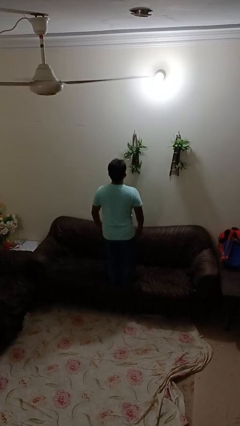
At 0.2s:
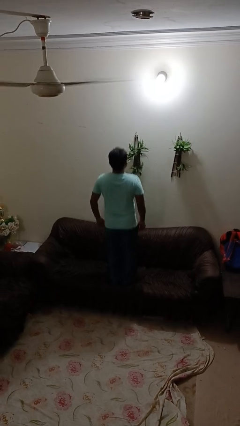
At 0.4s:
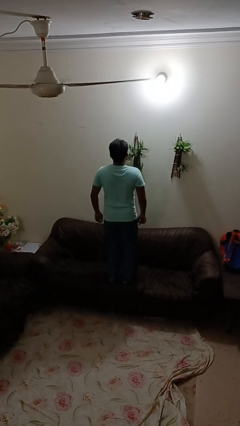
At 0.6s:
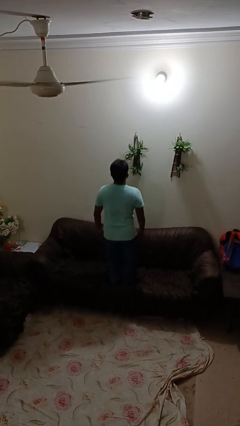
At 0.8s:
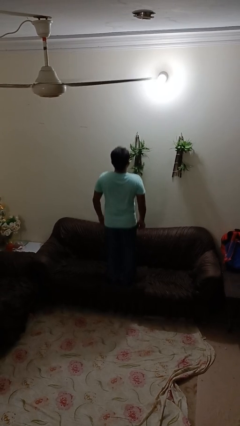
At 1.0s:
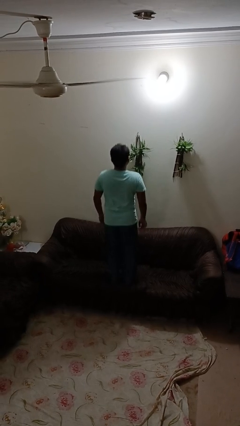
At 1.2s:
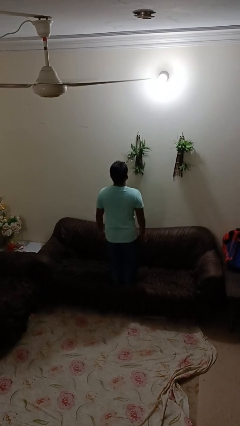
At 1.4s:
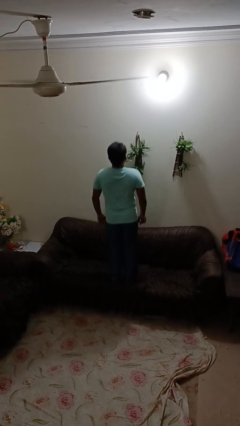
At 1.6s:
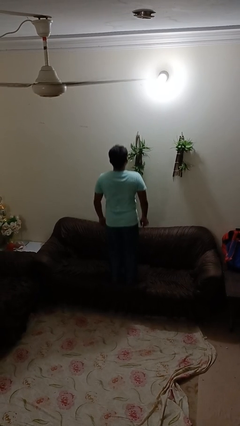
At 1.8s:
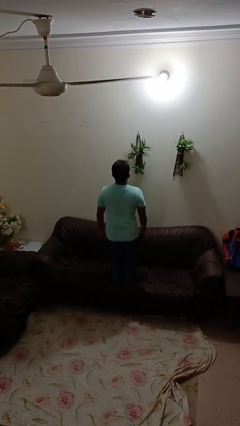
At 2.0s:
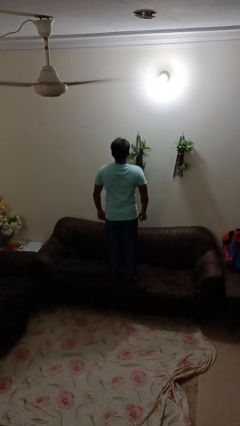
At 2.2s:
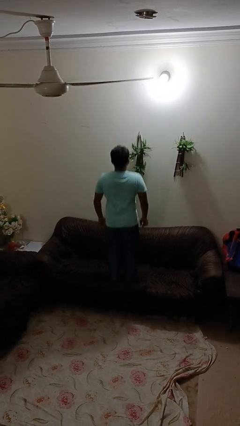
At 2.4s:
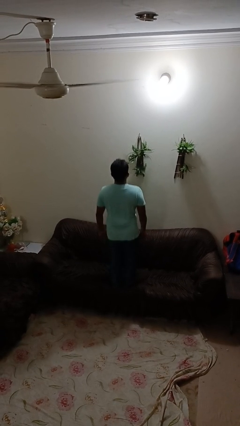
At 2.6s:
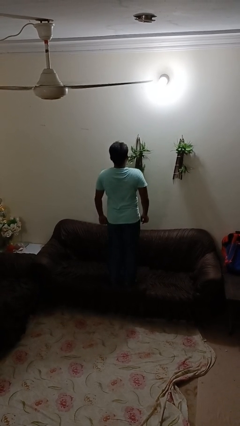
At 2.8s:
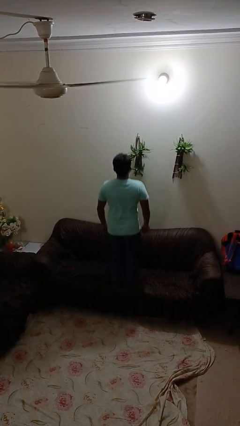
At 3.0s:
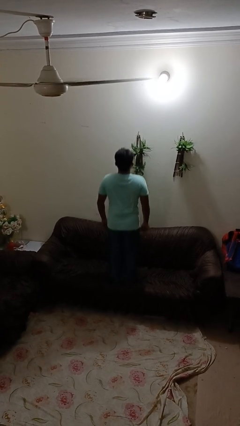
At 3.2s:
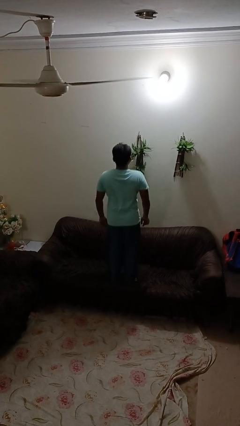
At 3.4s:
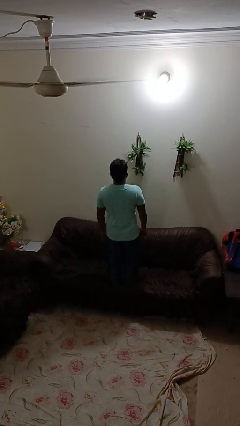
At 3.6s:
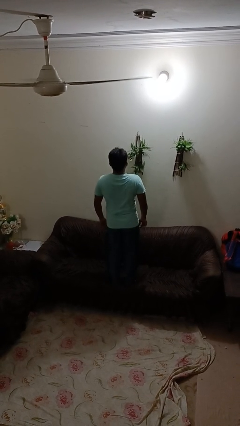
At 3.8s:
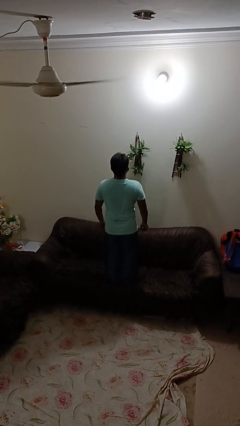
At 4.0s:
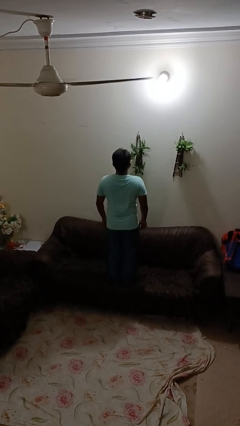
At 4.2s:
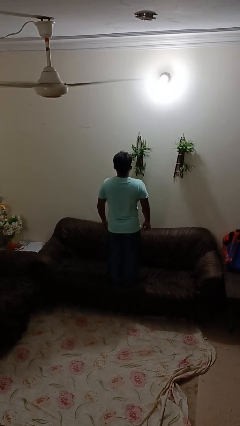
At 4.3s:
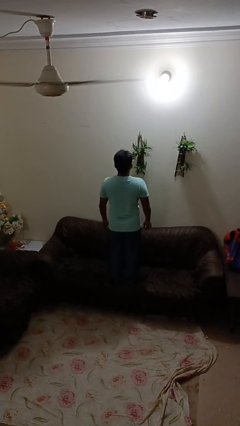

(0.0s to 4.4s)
person jumps on couch

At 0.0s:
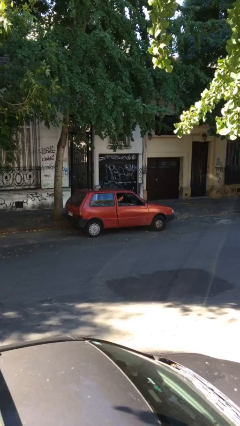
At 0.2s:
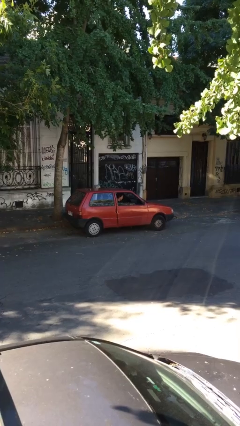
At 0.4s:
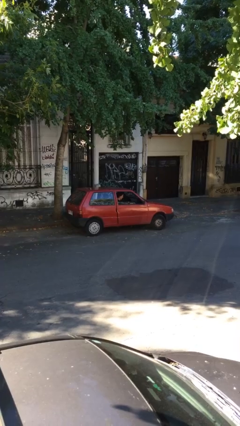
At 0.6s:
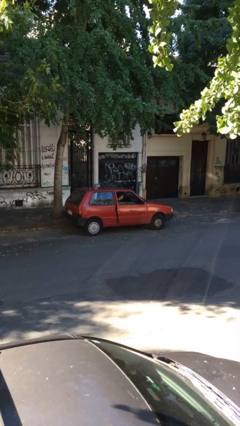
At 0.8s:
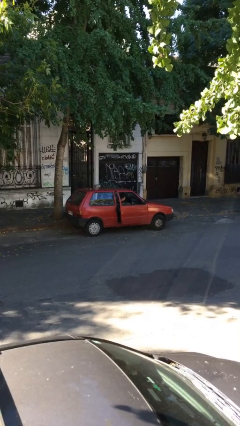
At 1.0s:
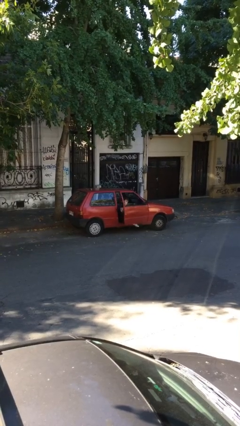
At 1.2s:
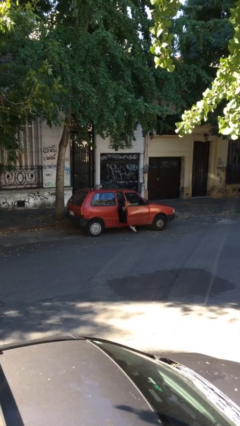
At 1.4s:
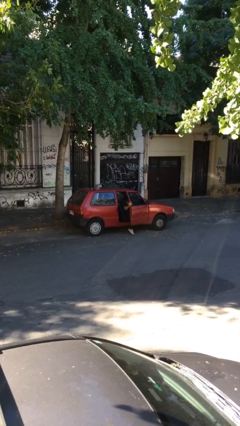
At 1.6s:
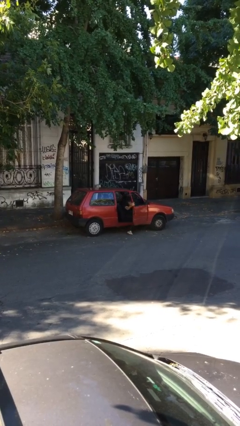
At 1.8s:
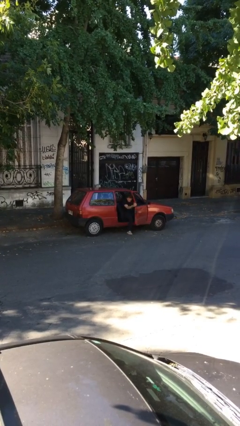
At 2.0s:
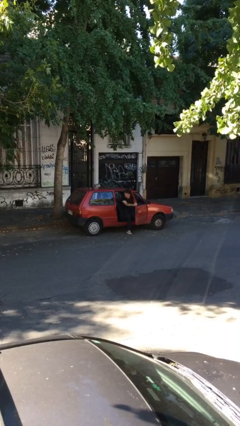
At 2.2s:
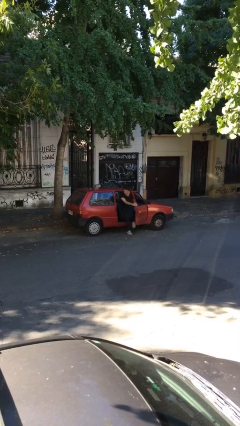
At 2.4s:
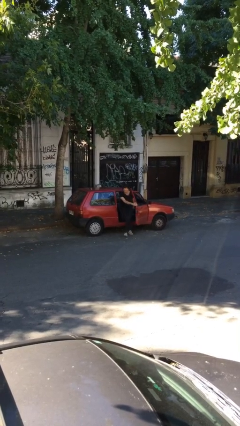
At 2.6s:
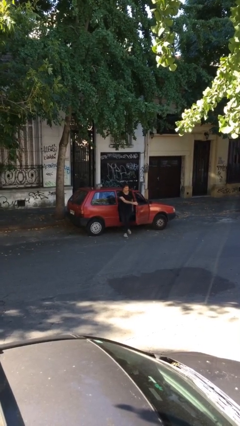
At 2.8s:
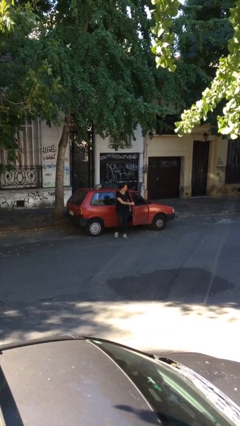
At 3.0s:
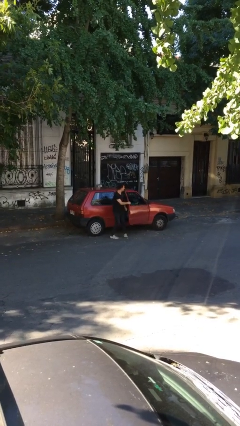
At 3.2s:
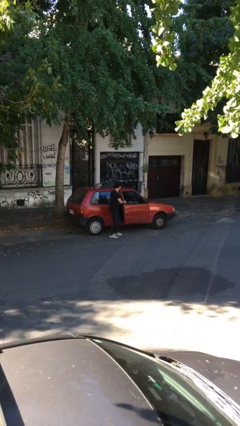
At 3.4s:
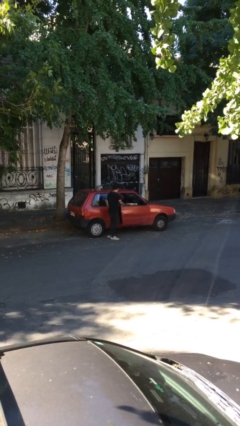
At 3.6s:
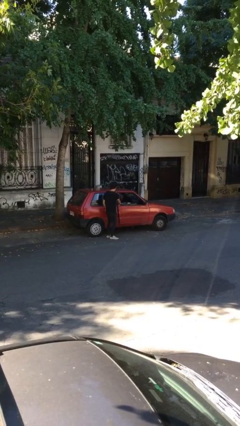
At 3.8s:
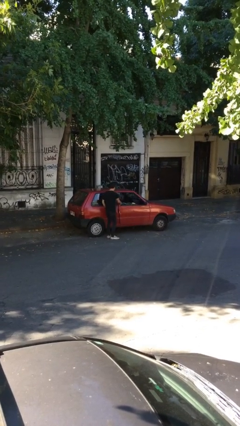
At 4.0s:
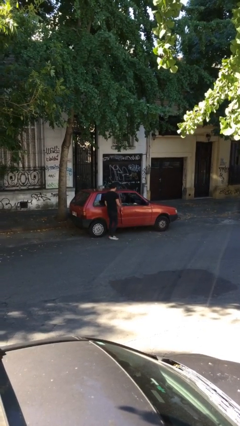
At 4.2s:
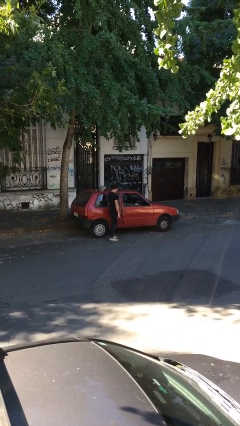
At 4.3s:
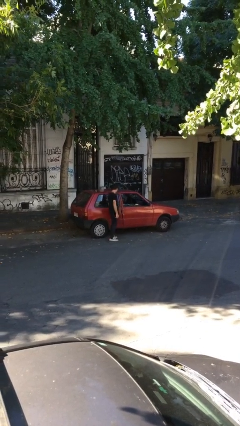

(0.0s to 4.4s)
car drops off person

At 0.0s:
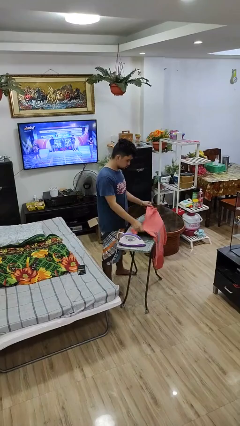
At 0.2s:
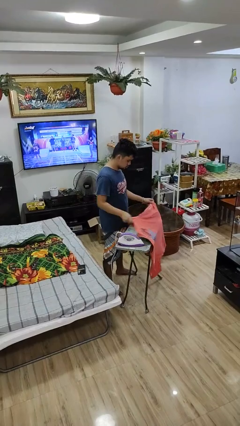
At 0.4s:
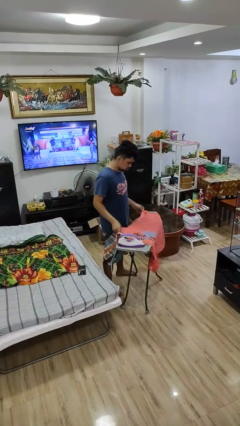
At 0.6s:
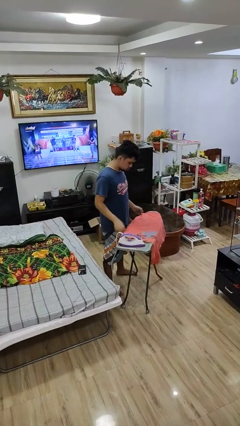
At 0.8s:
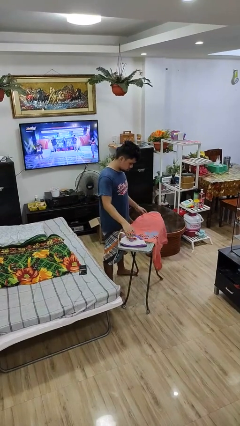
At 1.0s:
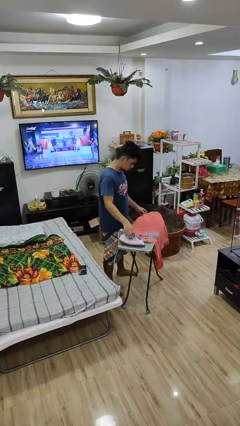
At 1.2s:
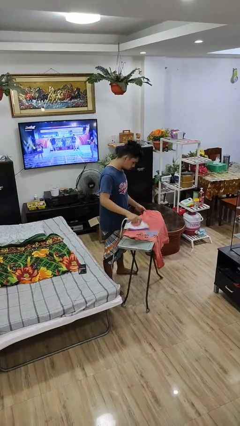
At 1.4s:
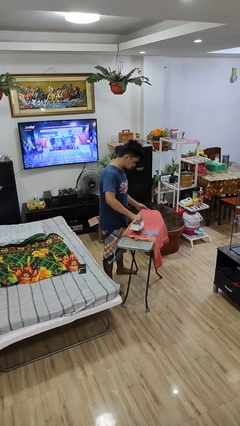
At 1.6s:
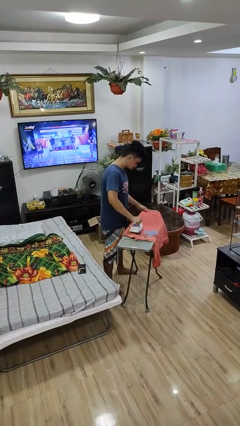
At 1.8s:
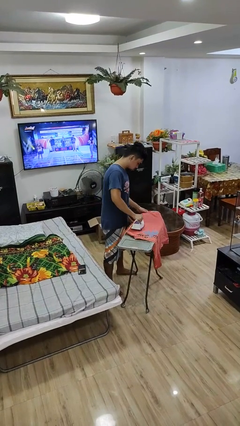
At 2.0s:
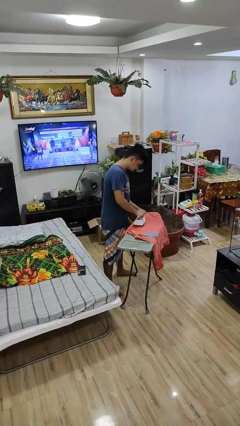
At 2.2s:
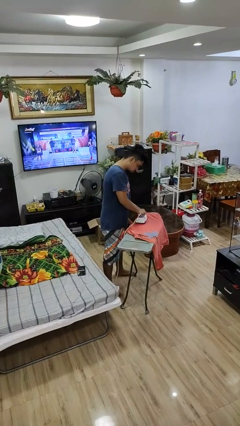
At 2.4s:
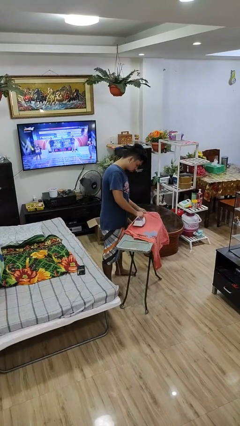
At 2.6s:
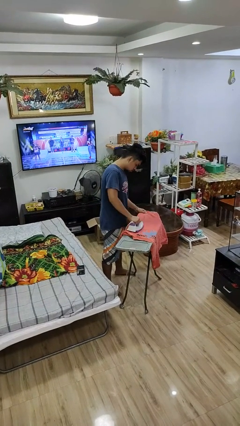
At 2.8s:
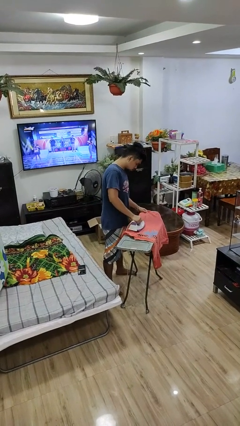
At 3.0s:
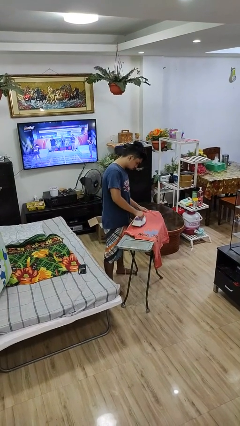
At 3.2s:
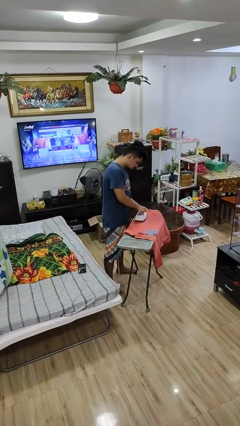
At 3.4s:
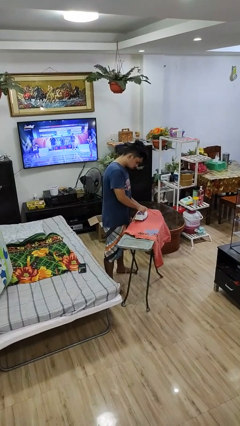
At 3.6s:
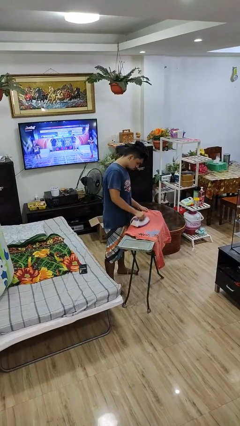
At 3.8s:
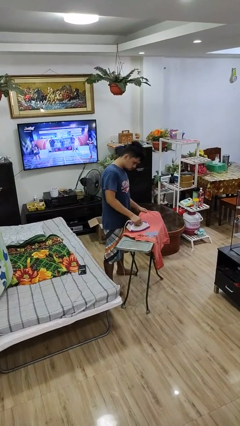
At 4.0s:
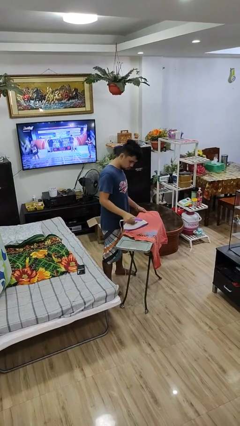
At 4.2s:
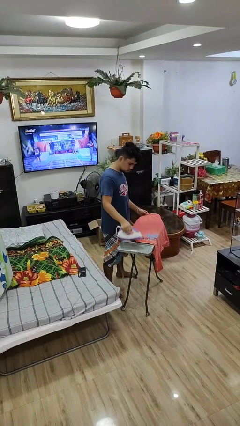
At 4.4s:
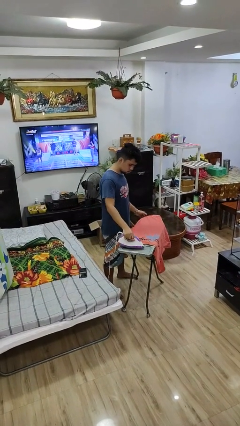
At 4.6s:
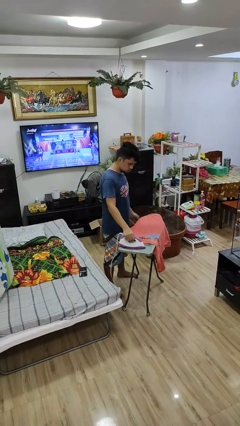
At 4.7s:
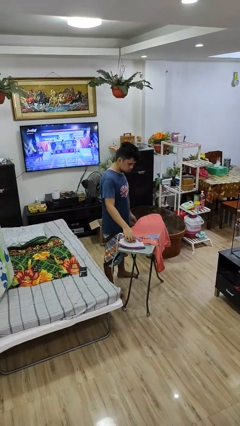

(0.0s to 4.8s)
person irons clothes

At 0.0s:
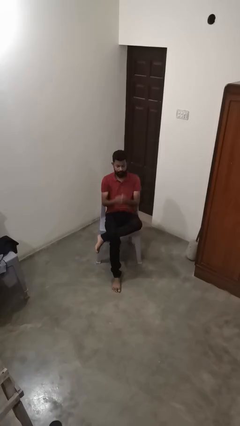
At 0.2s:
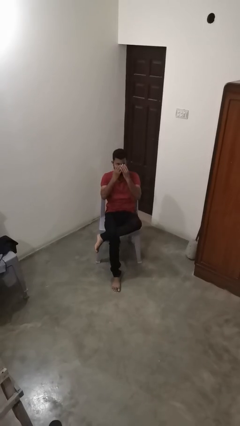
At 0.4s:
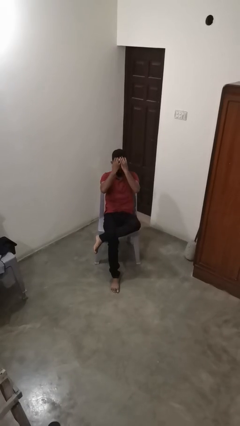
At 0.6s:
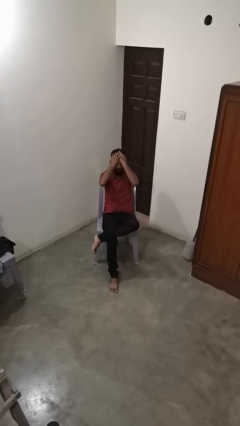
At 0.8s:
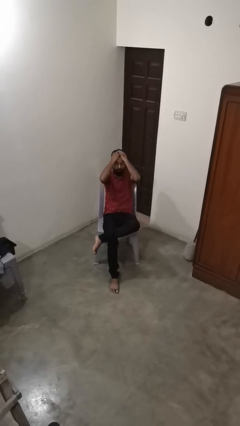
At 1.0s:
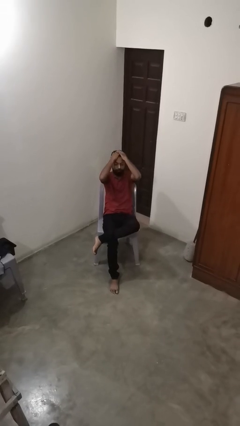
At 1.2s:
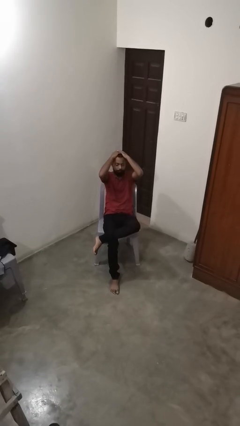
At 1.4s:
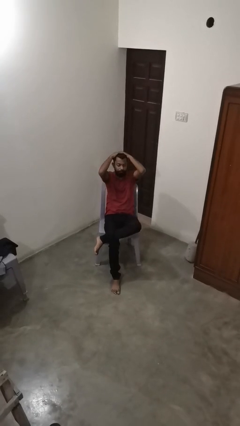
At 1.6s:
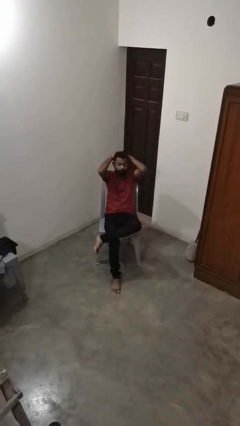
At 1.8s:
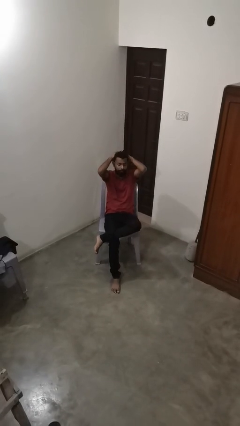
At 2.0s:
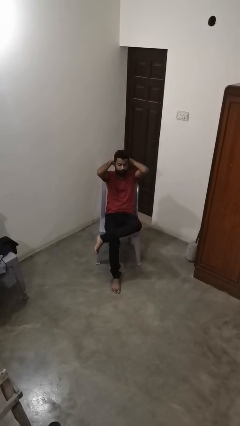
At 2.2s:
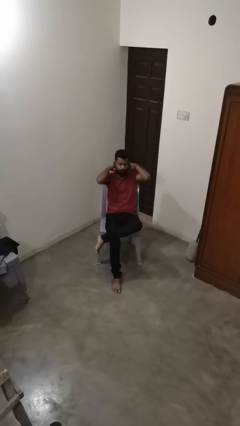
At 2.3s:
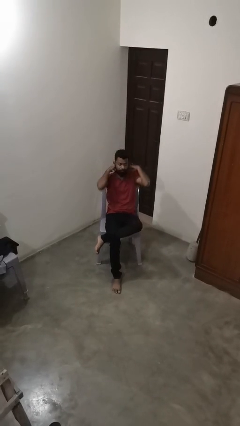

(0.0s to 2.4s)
person strokes hair

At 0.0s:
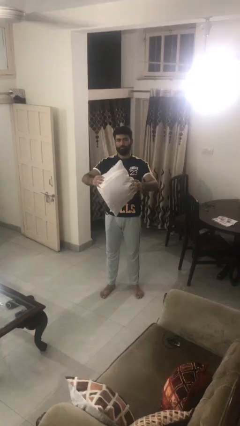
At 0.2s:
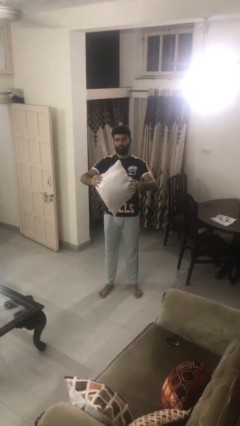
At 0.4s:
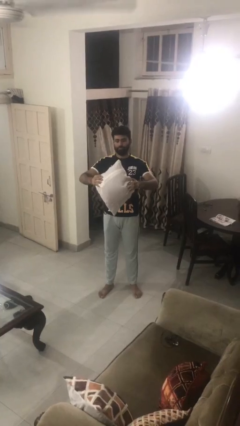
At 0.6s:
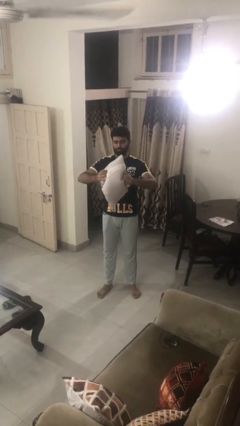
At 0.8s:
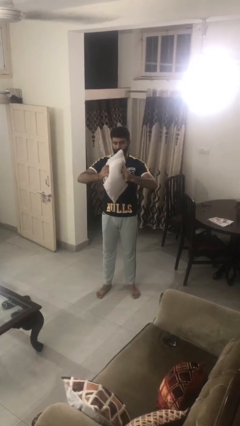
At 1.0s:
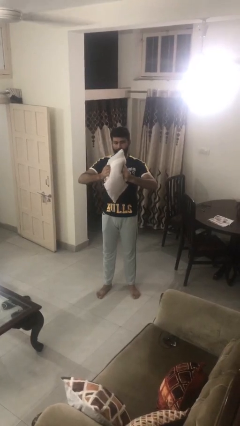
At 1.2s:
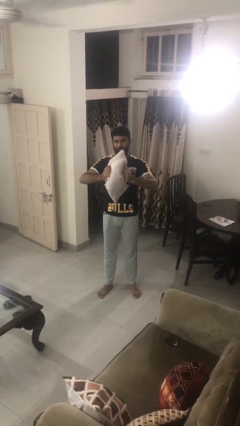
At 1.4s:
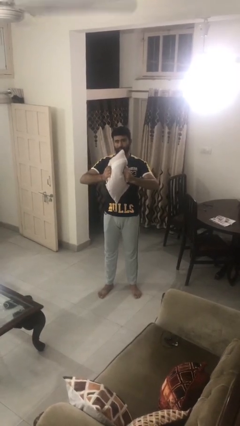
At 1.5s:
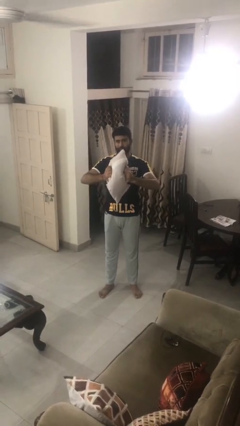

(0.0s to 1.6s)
person squeezes object

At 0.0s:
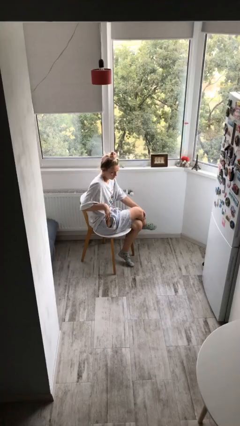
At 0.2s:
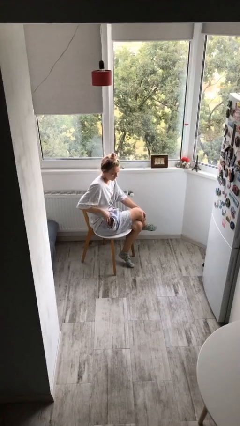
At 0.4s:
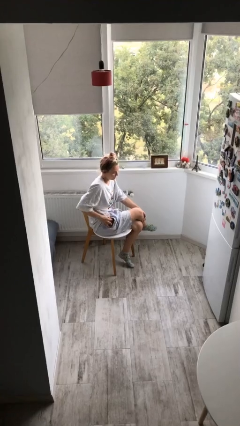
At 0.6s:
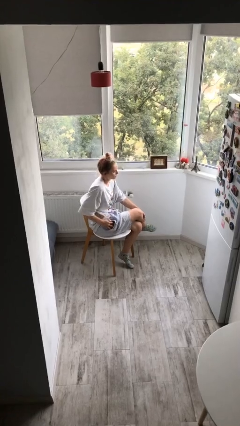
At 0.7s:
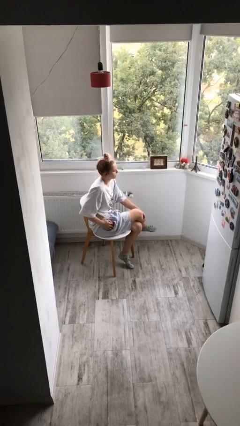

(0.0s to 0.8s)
person puts phone into pocket
